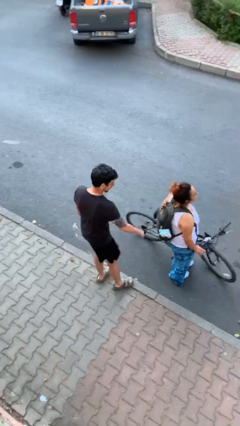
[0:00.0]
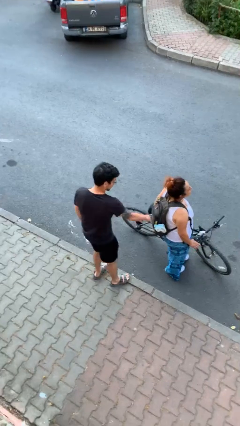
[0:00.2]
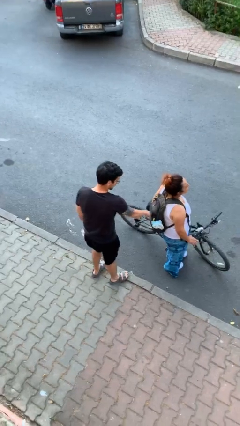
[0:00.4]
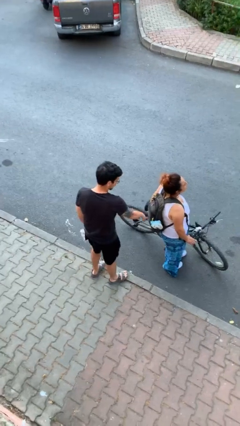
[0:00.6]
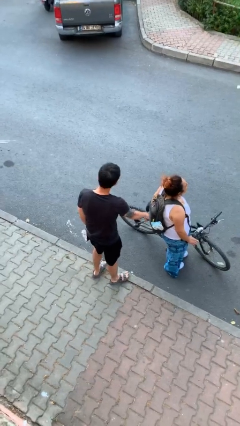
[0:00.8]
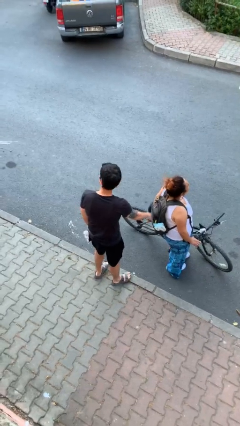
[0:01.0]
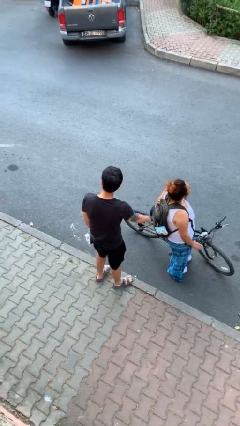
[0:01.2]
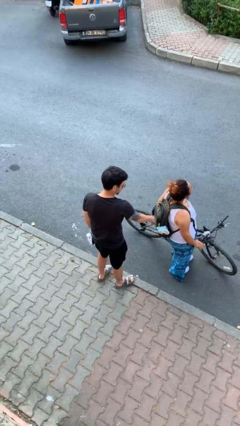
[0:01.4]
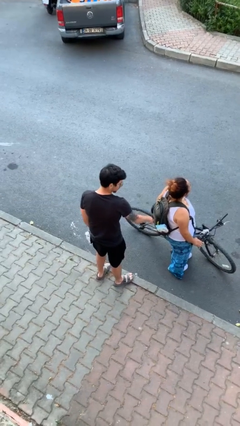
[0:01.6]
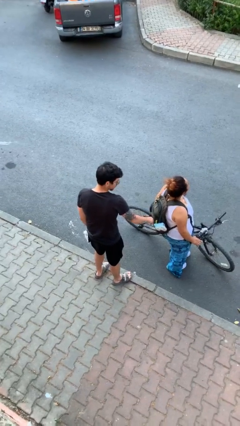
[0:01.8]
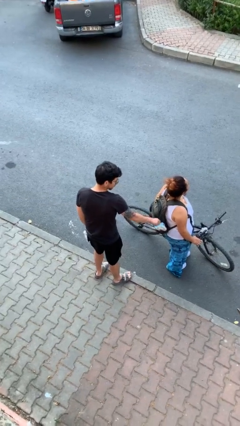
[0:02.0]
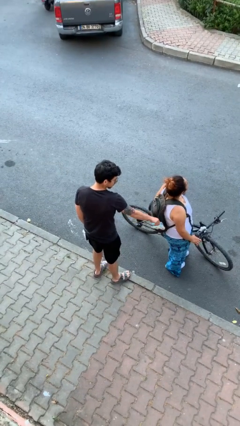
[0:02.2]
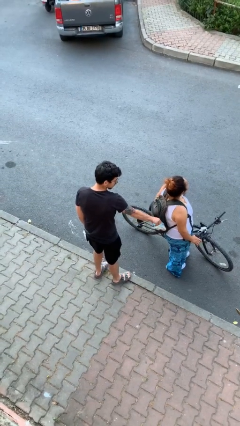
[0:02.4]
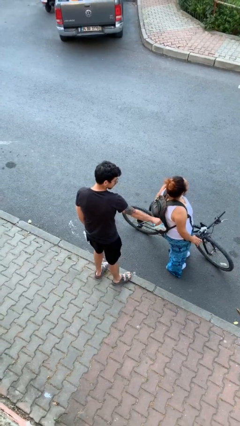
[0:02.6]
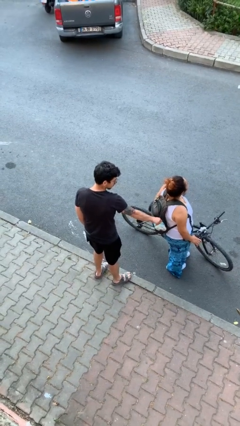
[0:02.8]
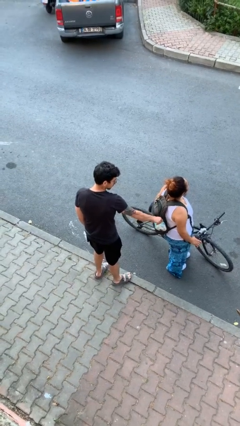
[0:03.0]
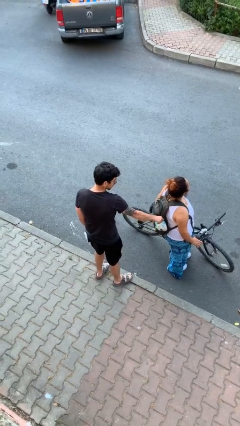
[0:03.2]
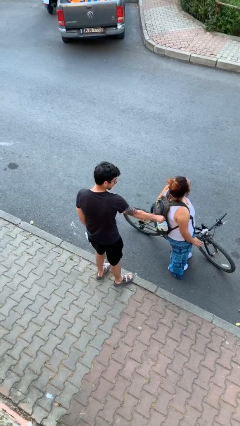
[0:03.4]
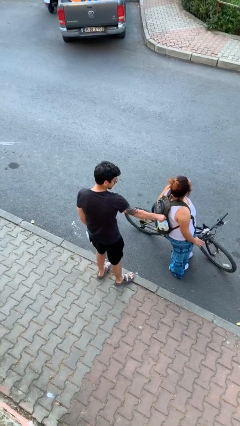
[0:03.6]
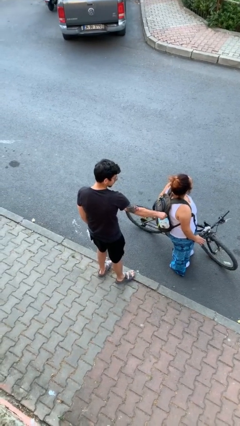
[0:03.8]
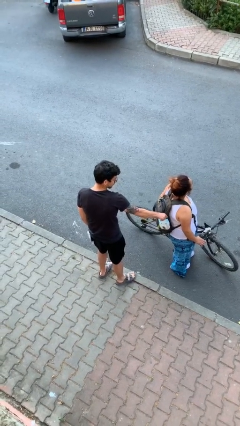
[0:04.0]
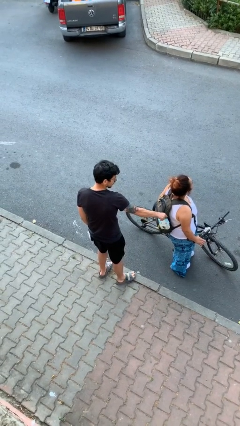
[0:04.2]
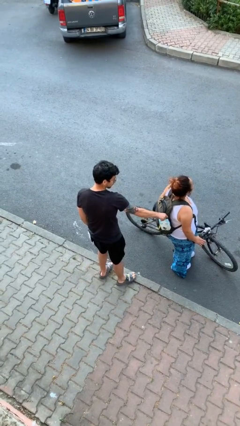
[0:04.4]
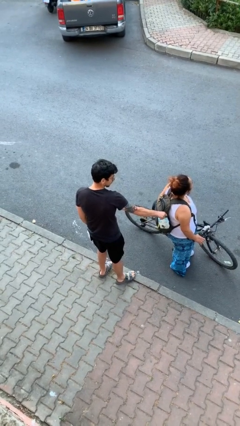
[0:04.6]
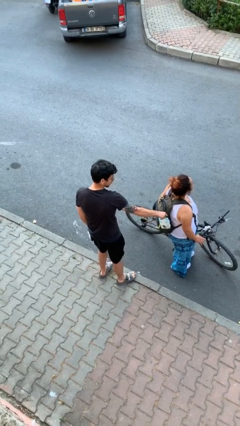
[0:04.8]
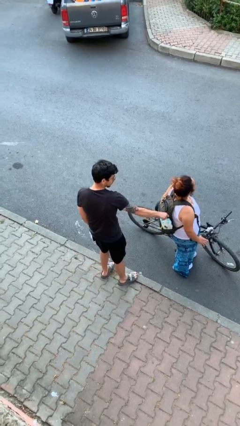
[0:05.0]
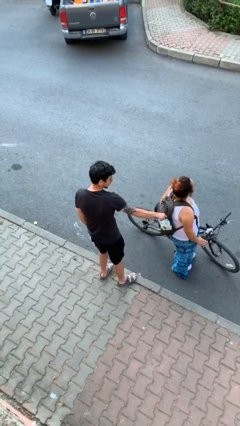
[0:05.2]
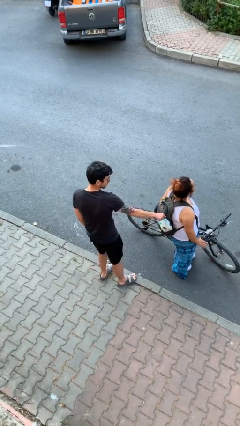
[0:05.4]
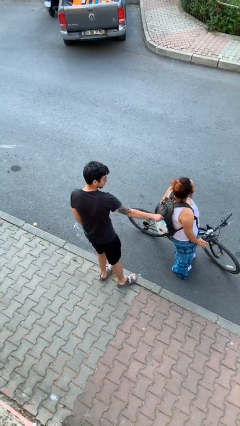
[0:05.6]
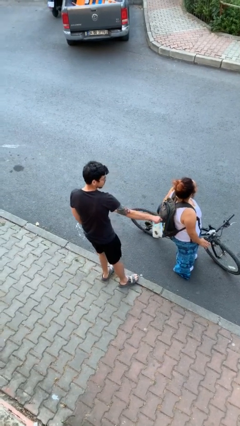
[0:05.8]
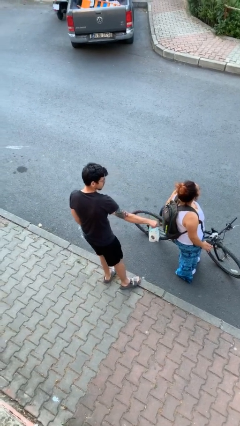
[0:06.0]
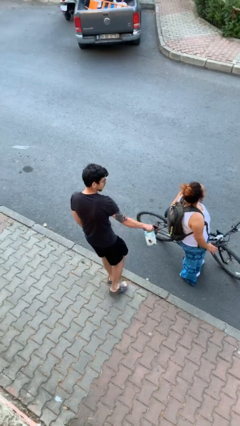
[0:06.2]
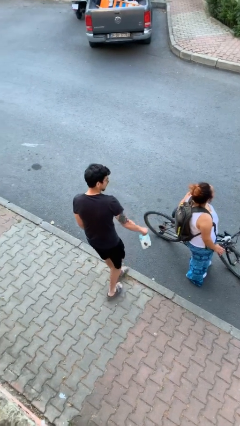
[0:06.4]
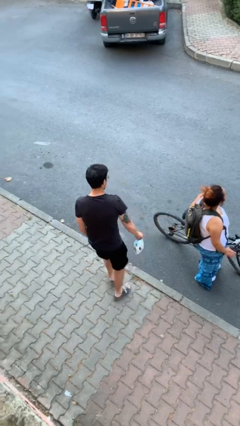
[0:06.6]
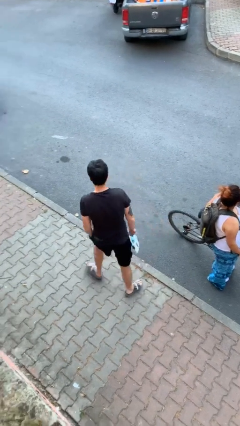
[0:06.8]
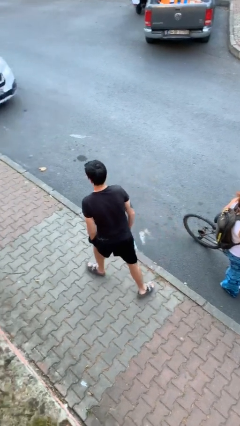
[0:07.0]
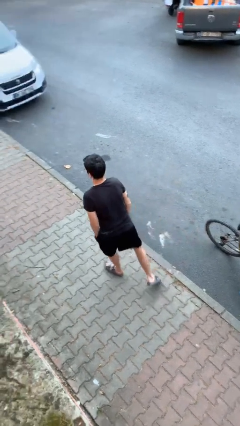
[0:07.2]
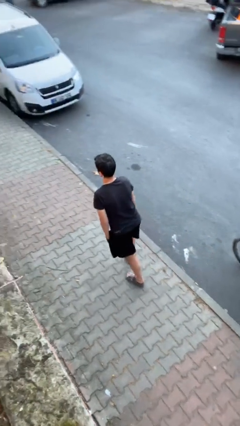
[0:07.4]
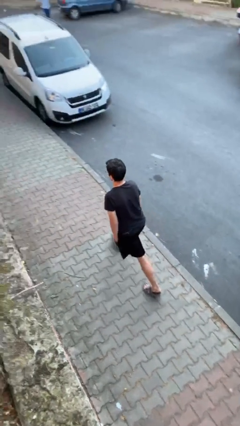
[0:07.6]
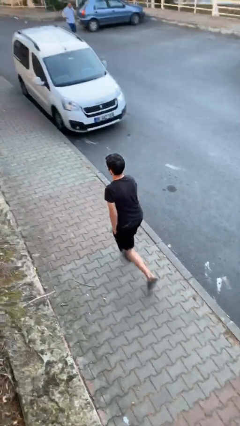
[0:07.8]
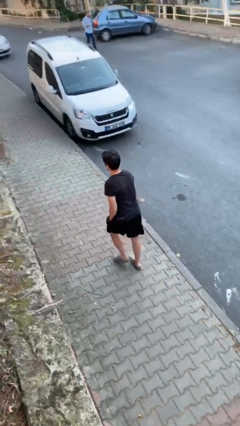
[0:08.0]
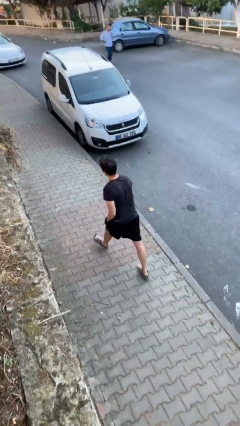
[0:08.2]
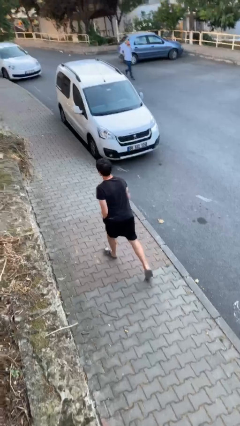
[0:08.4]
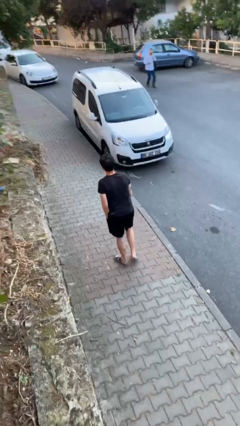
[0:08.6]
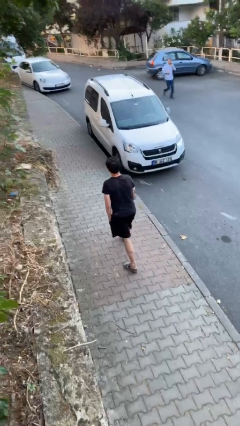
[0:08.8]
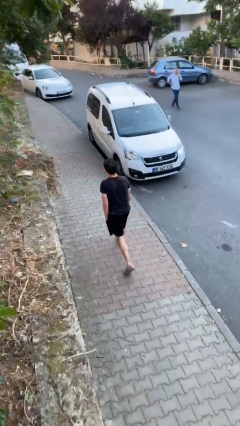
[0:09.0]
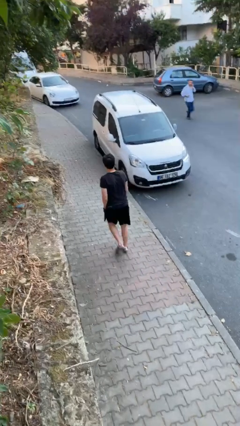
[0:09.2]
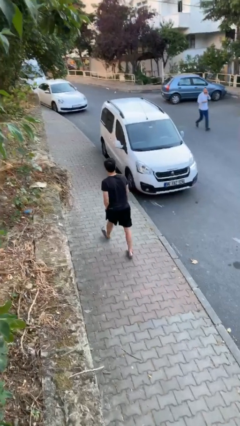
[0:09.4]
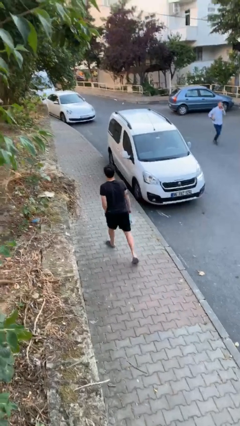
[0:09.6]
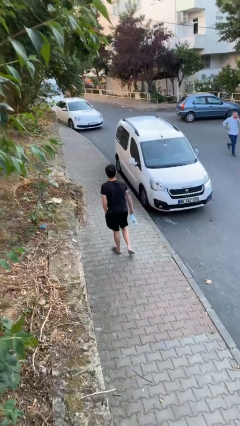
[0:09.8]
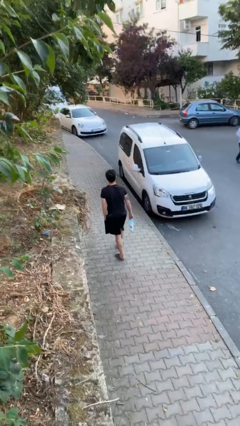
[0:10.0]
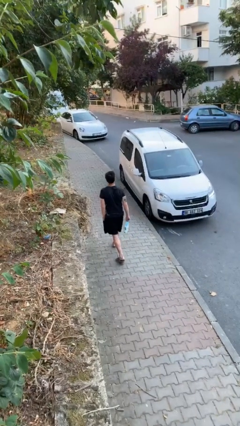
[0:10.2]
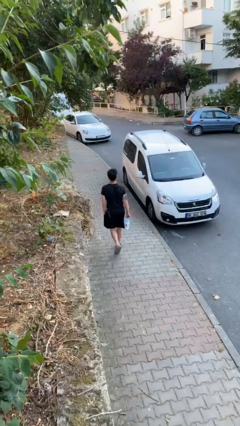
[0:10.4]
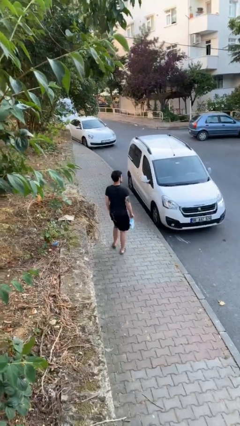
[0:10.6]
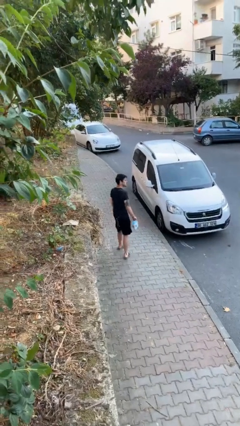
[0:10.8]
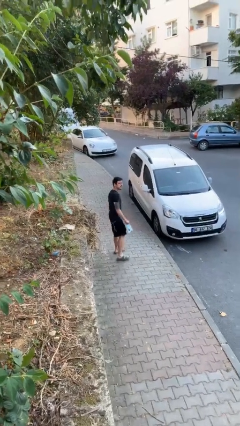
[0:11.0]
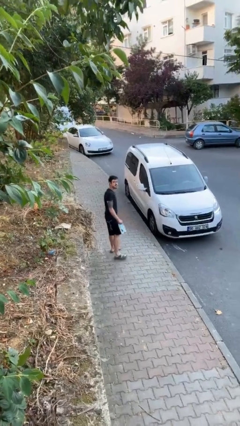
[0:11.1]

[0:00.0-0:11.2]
person steals object from person

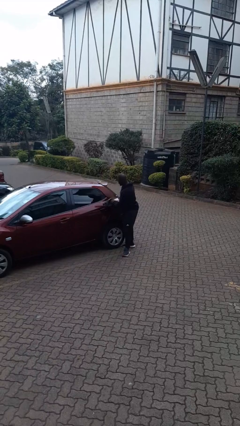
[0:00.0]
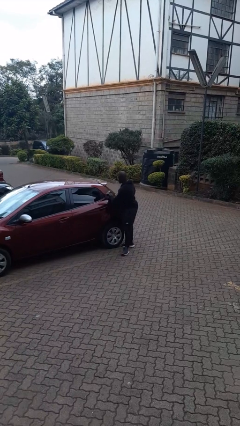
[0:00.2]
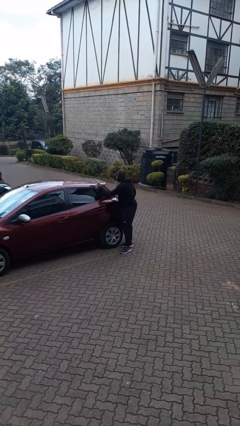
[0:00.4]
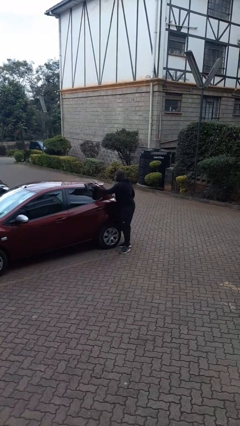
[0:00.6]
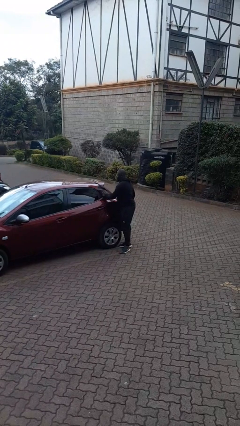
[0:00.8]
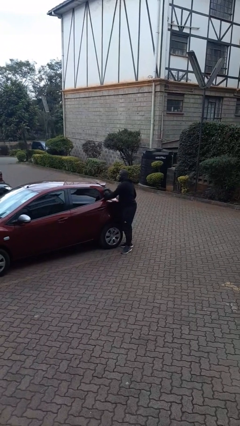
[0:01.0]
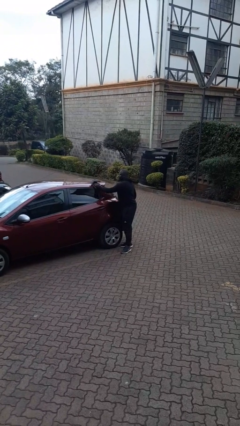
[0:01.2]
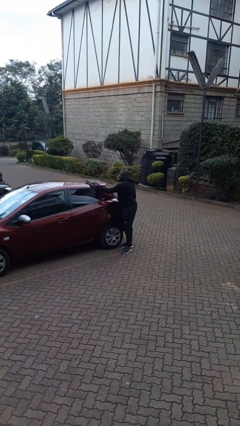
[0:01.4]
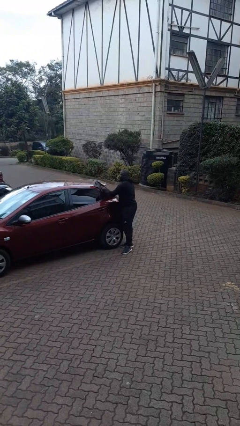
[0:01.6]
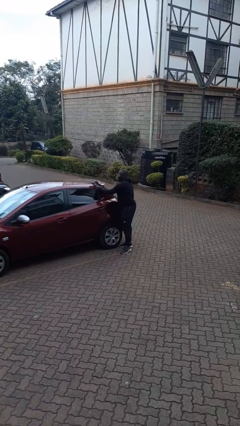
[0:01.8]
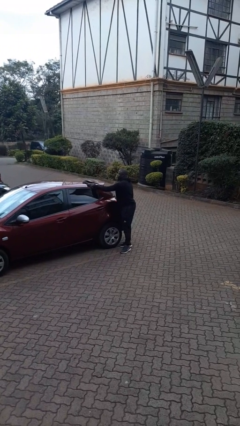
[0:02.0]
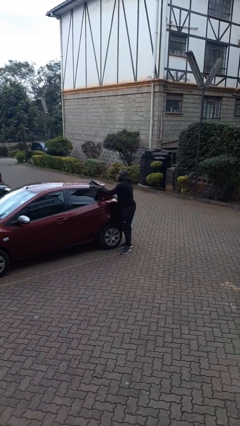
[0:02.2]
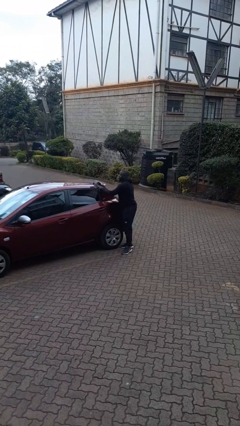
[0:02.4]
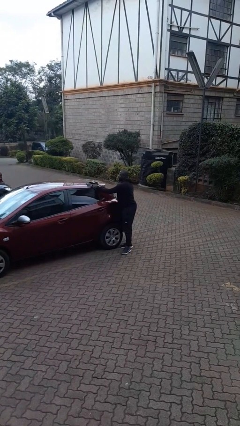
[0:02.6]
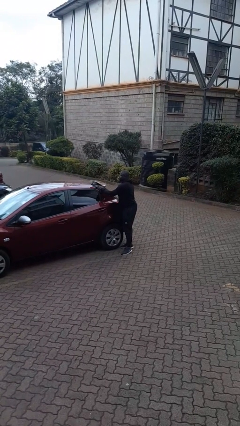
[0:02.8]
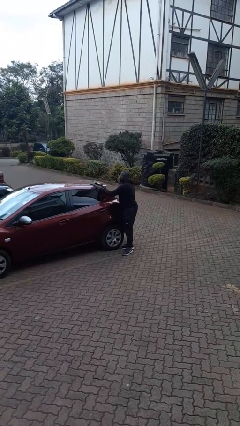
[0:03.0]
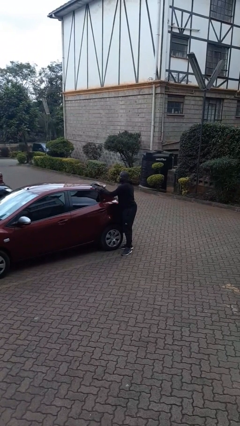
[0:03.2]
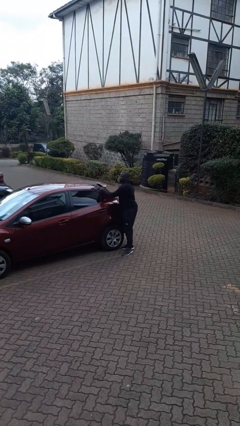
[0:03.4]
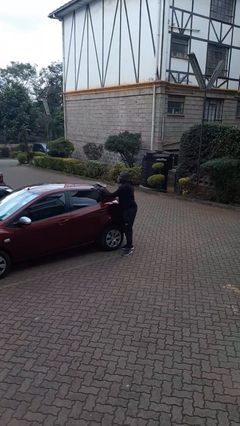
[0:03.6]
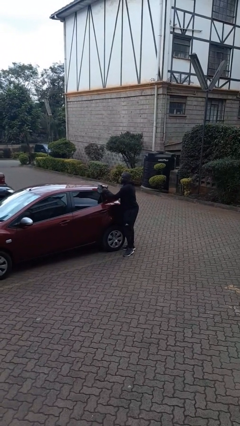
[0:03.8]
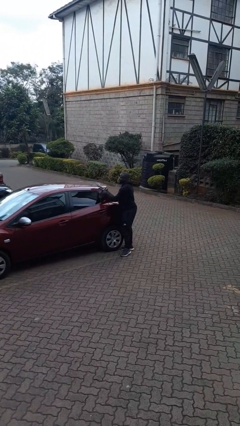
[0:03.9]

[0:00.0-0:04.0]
person polishes car with rag

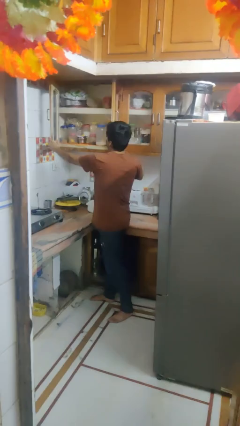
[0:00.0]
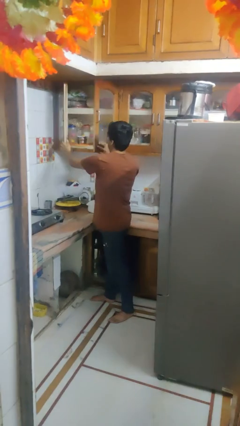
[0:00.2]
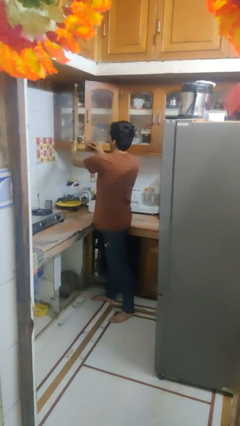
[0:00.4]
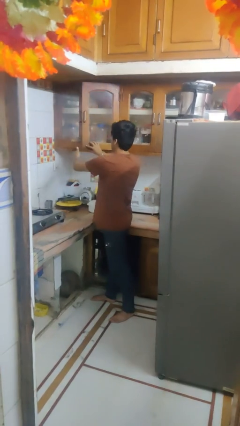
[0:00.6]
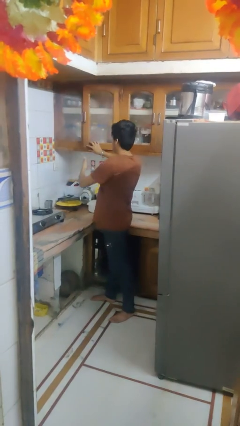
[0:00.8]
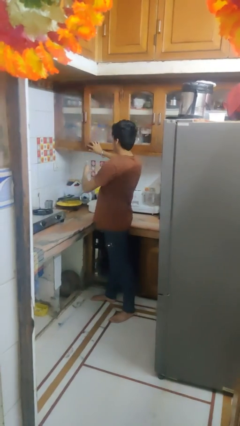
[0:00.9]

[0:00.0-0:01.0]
person closes cabinet

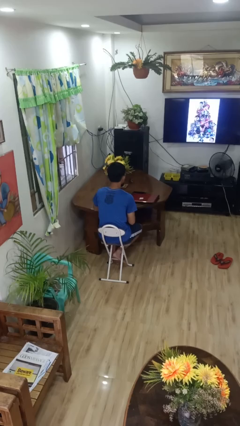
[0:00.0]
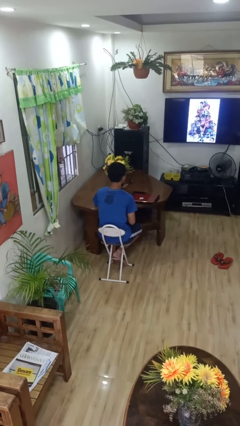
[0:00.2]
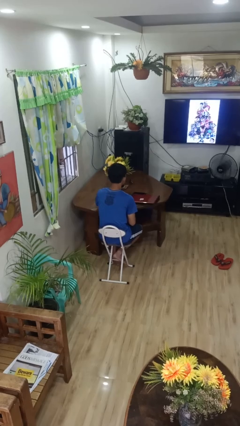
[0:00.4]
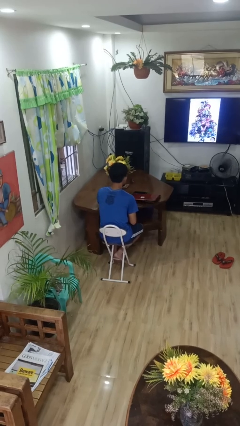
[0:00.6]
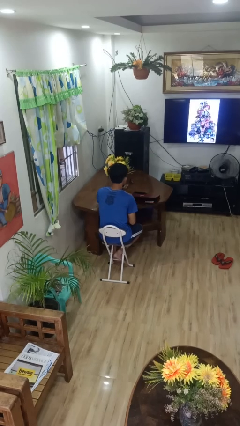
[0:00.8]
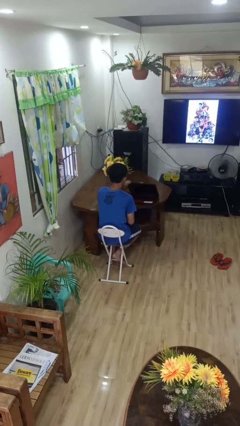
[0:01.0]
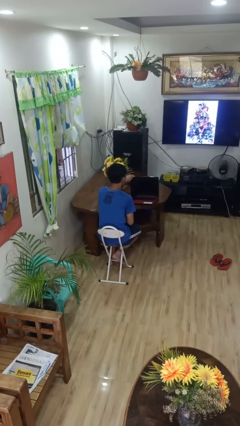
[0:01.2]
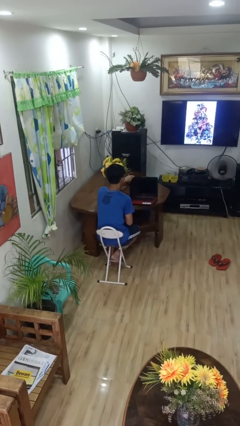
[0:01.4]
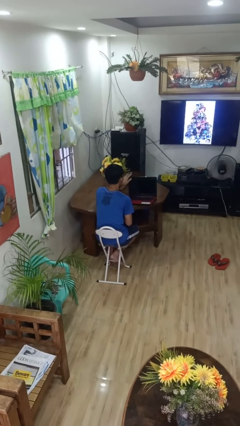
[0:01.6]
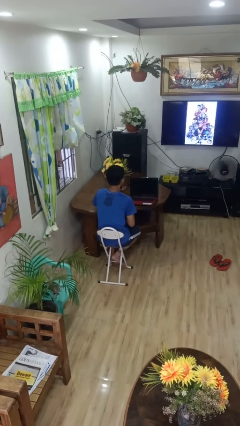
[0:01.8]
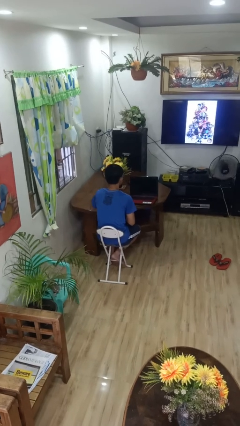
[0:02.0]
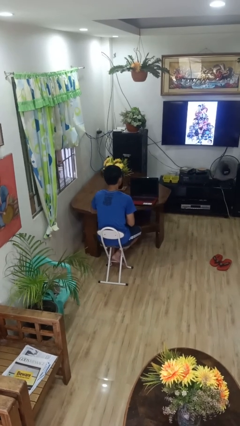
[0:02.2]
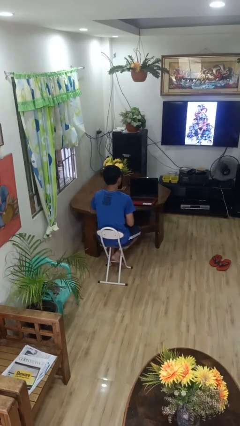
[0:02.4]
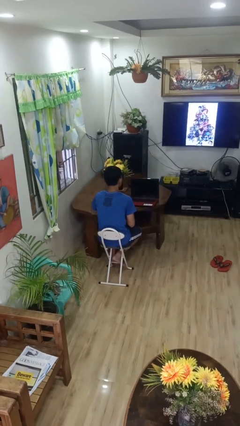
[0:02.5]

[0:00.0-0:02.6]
person opens laptop
